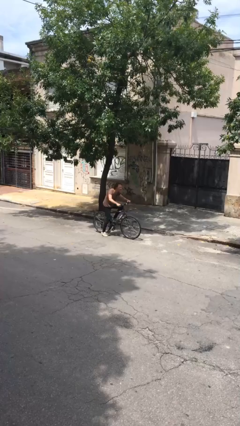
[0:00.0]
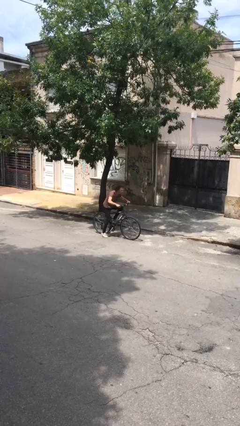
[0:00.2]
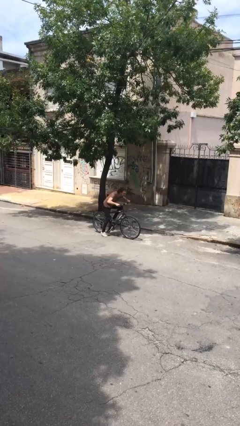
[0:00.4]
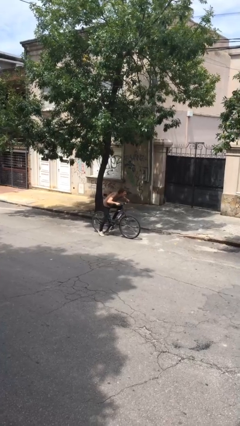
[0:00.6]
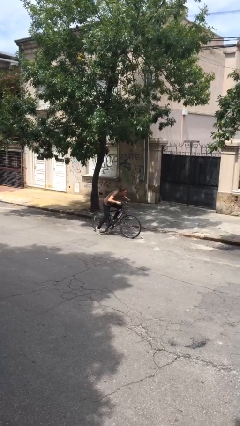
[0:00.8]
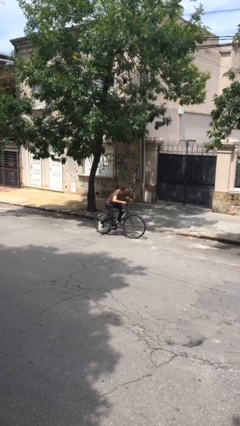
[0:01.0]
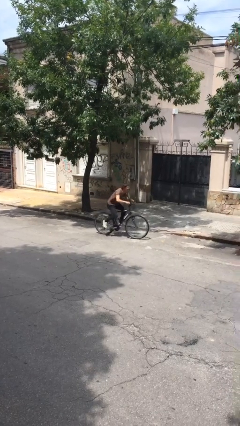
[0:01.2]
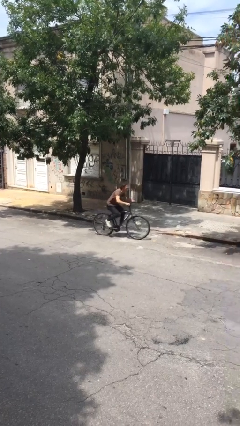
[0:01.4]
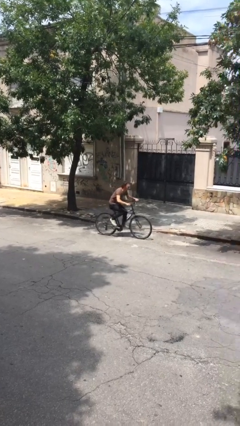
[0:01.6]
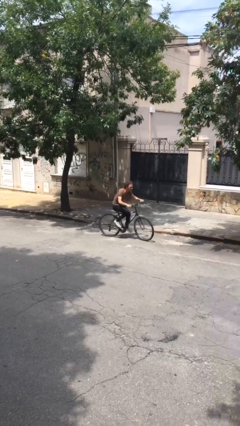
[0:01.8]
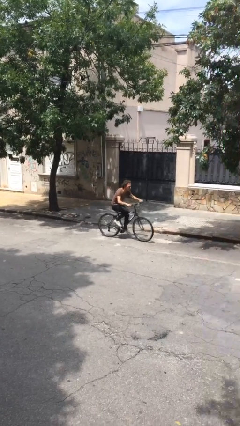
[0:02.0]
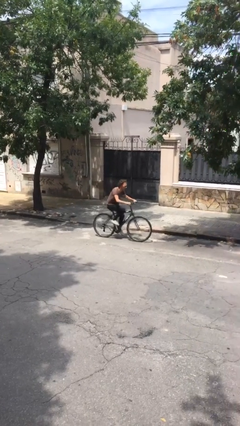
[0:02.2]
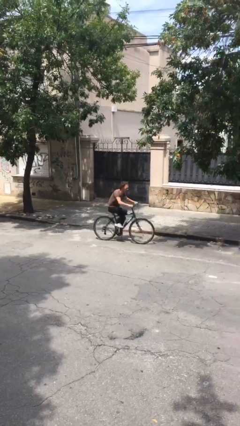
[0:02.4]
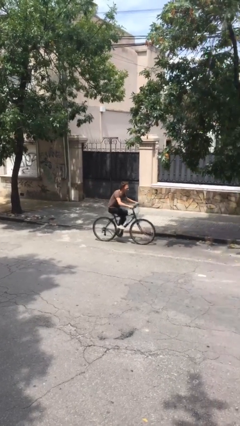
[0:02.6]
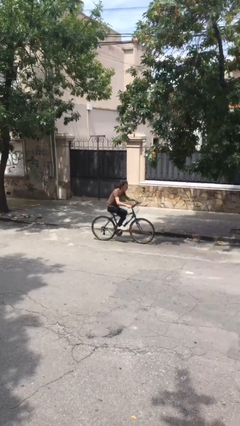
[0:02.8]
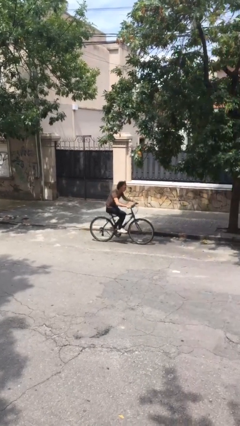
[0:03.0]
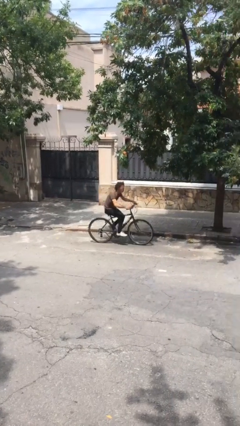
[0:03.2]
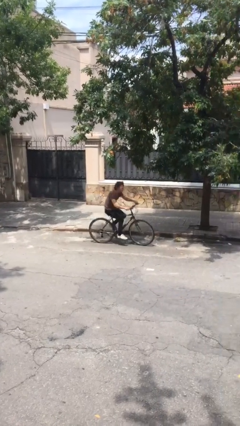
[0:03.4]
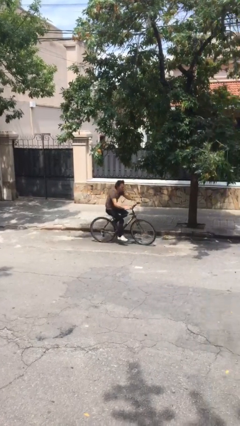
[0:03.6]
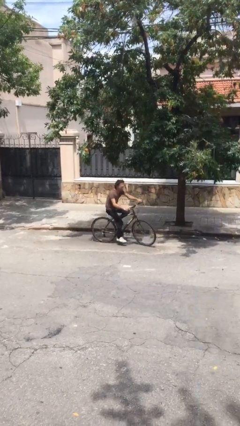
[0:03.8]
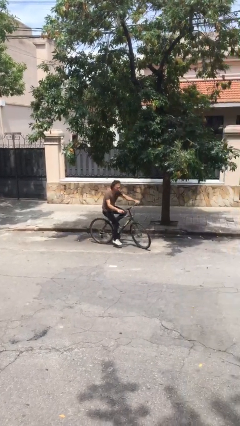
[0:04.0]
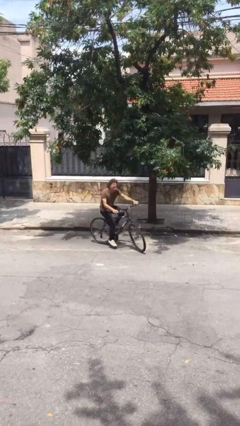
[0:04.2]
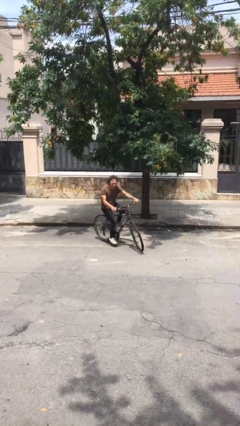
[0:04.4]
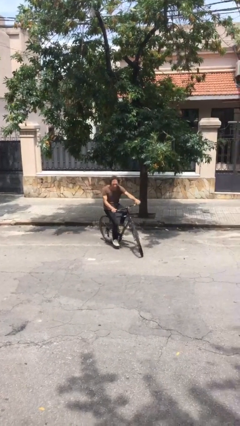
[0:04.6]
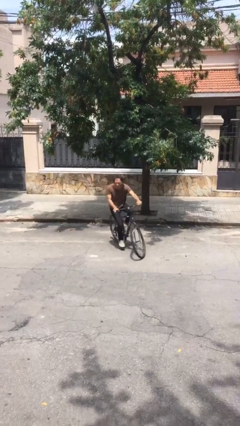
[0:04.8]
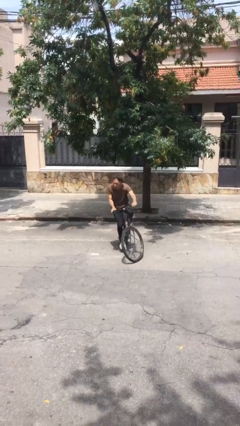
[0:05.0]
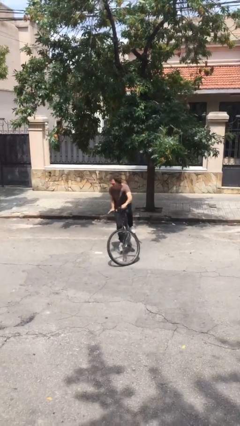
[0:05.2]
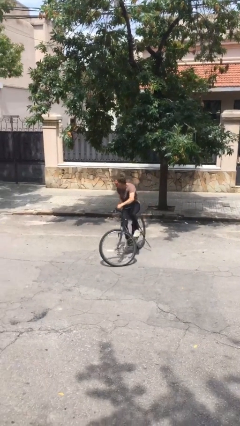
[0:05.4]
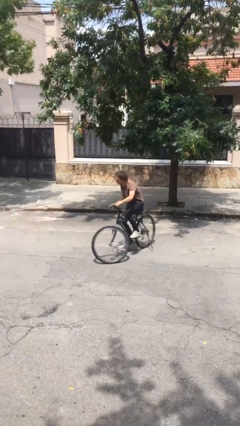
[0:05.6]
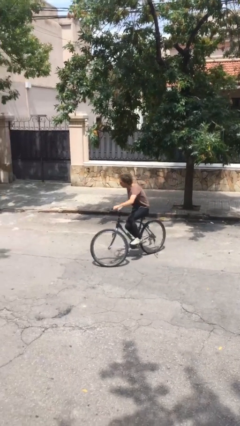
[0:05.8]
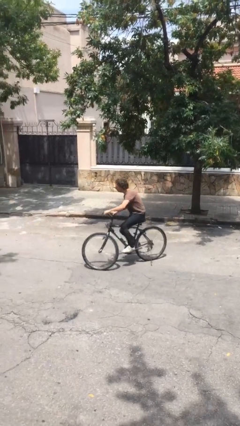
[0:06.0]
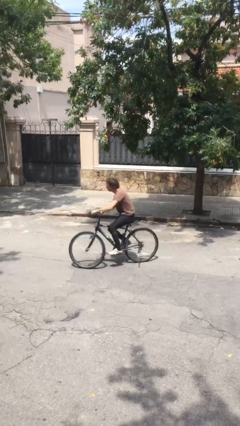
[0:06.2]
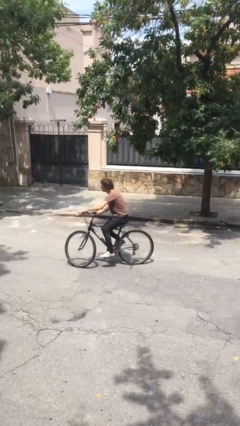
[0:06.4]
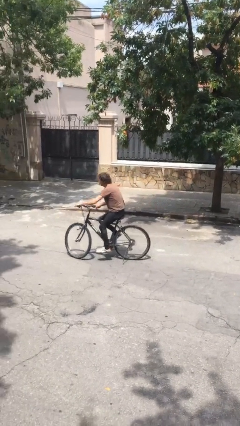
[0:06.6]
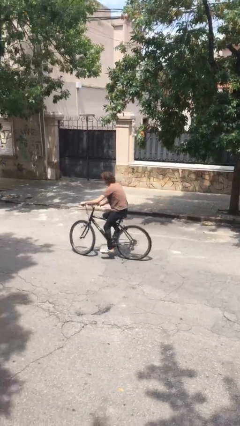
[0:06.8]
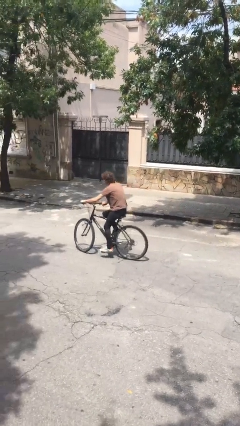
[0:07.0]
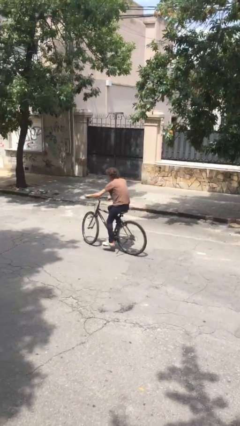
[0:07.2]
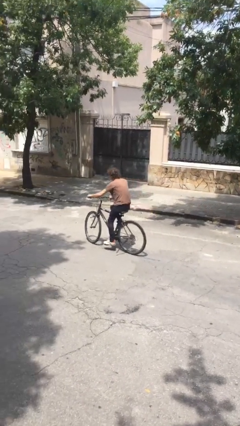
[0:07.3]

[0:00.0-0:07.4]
person rides bicycle

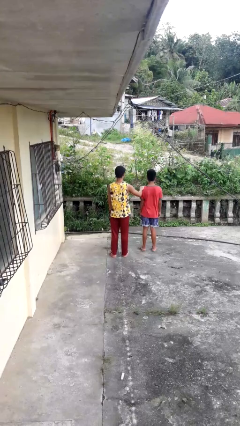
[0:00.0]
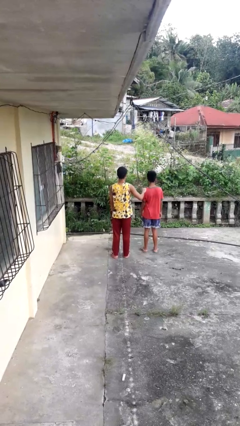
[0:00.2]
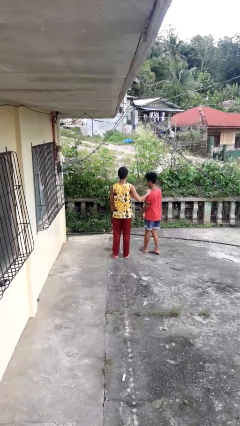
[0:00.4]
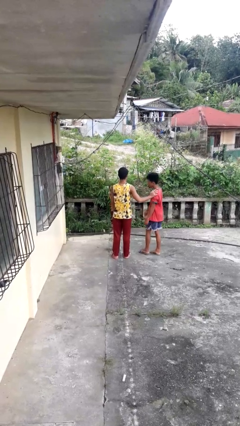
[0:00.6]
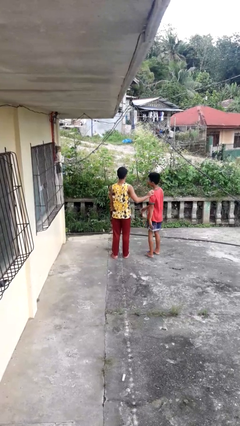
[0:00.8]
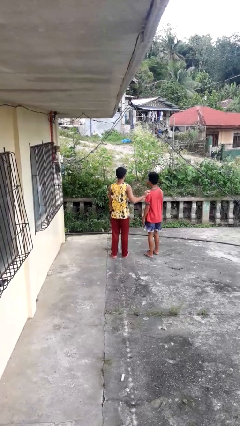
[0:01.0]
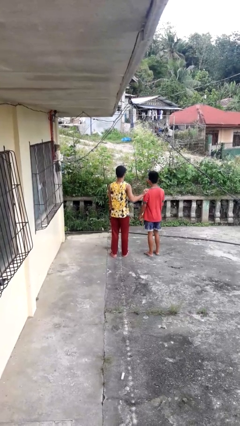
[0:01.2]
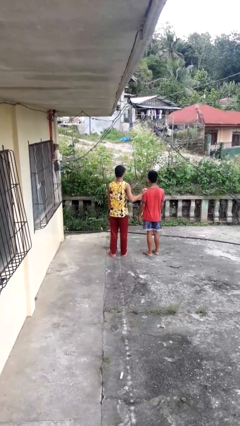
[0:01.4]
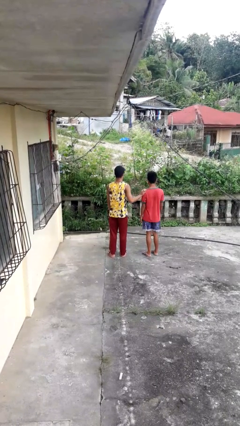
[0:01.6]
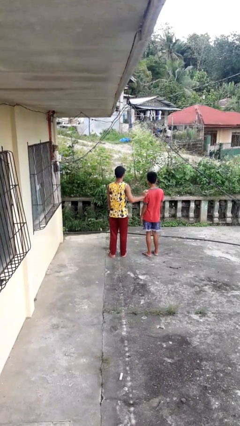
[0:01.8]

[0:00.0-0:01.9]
person grabs person by shoulder

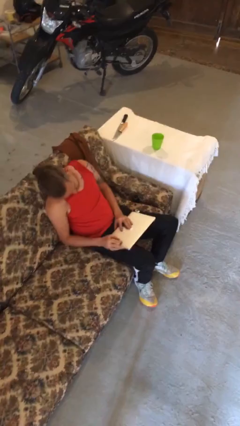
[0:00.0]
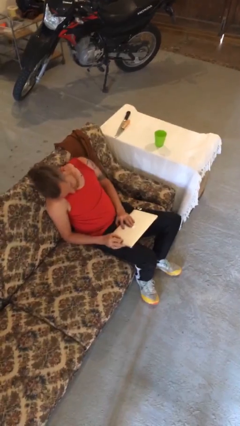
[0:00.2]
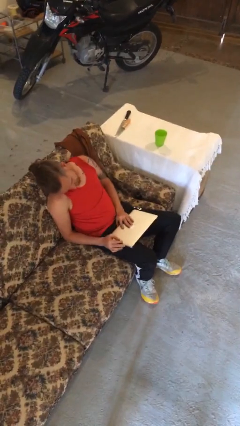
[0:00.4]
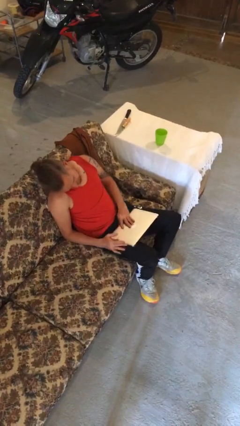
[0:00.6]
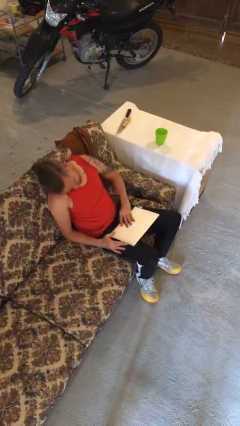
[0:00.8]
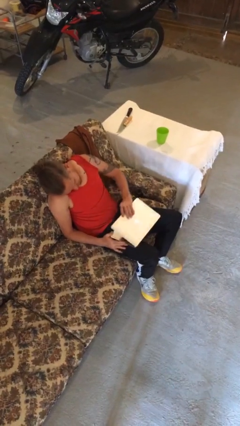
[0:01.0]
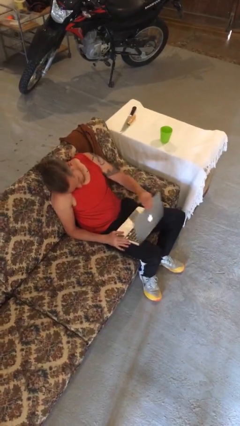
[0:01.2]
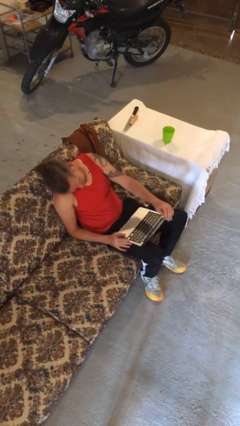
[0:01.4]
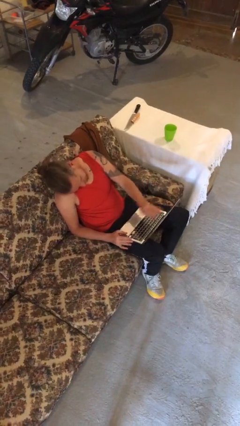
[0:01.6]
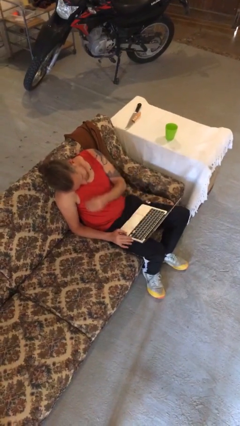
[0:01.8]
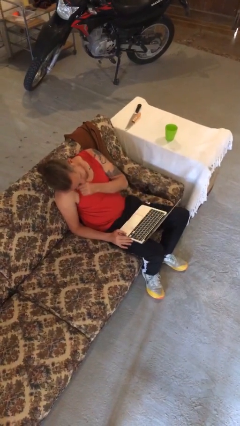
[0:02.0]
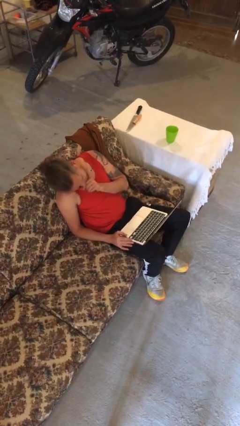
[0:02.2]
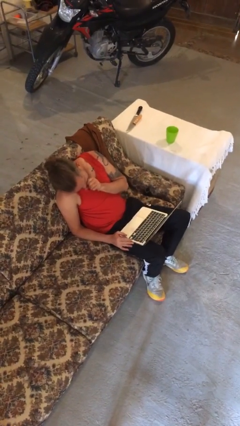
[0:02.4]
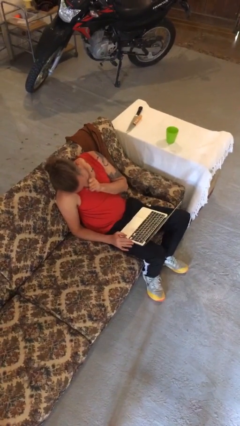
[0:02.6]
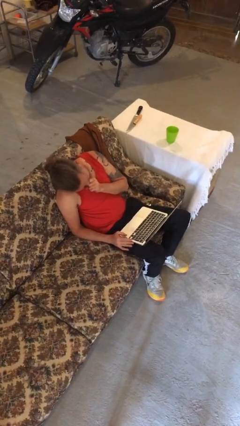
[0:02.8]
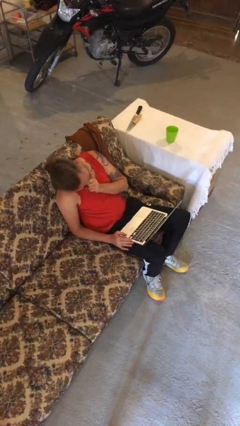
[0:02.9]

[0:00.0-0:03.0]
person opens laptop

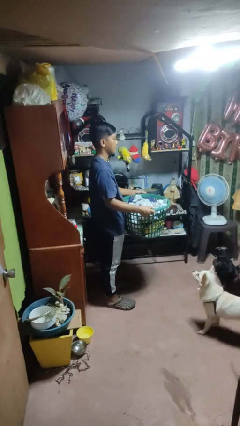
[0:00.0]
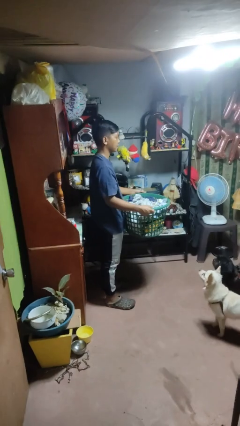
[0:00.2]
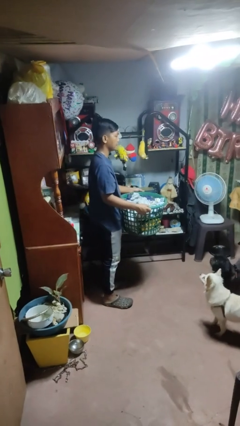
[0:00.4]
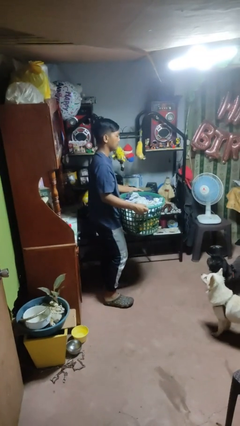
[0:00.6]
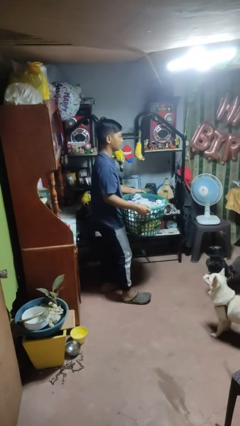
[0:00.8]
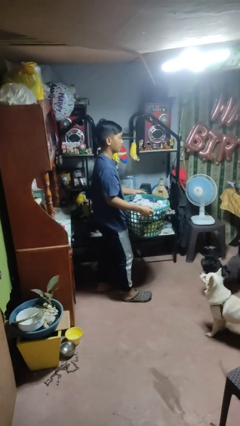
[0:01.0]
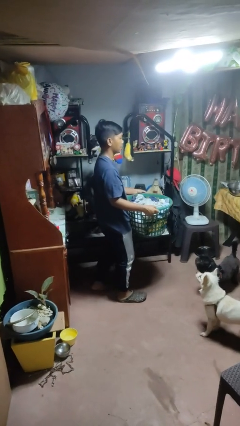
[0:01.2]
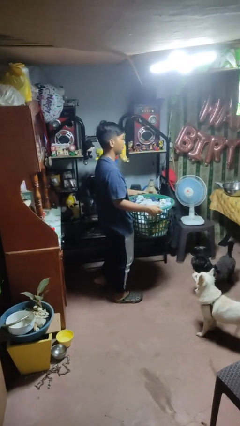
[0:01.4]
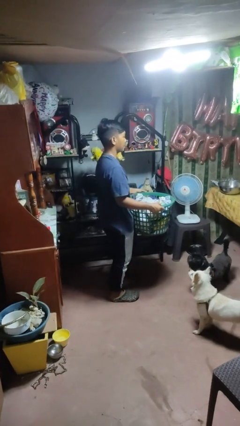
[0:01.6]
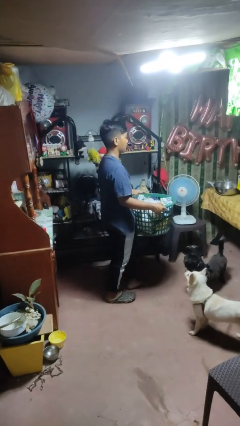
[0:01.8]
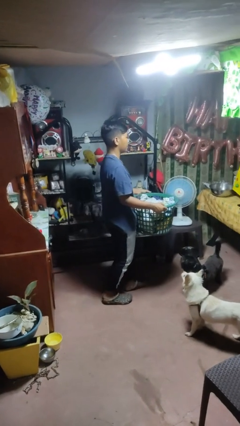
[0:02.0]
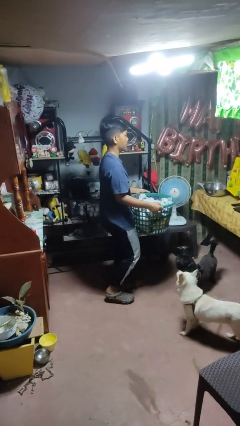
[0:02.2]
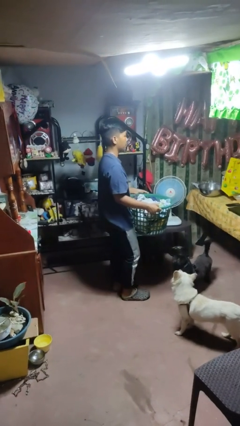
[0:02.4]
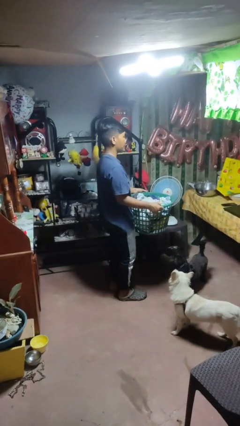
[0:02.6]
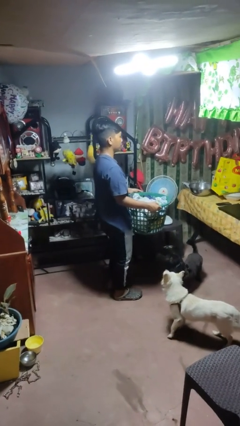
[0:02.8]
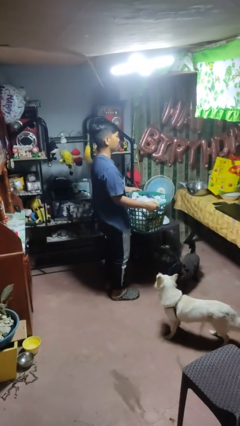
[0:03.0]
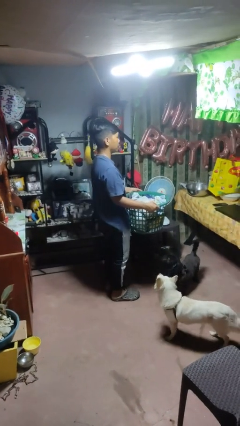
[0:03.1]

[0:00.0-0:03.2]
person carries laundry basket

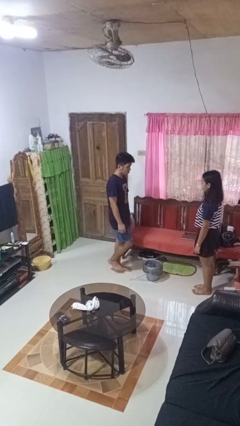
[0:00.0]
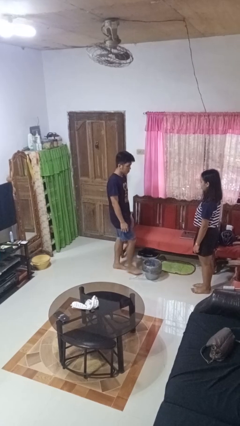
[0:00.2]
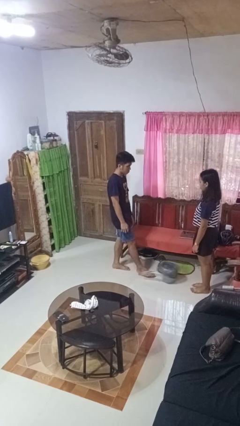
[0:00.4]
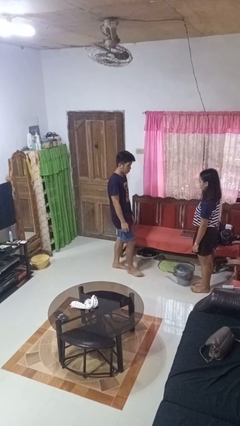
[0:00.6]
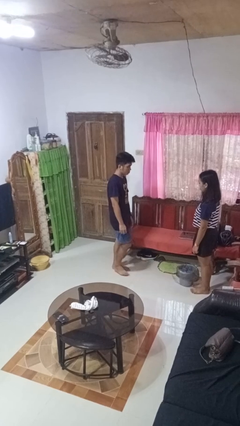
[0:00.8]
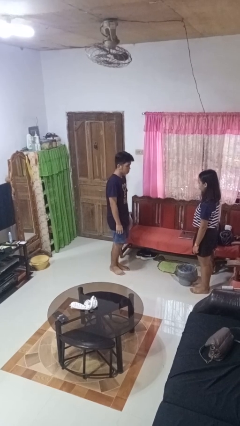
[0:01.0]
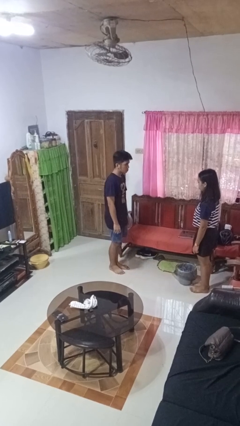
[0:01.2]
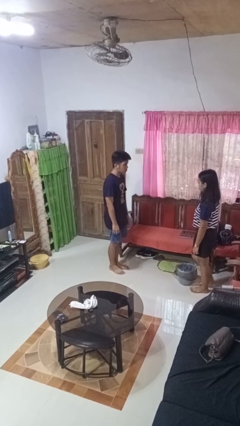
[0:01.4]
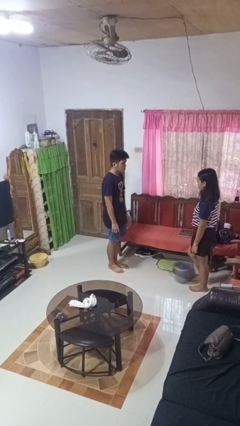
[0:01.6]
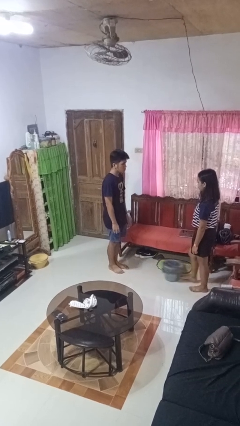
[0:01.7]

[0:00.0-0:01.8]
person kicks object to person

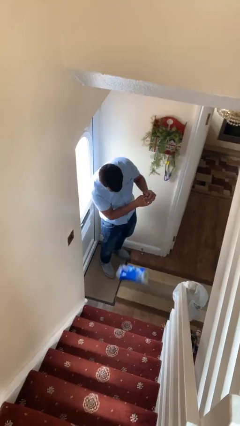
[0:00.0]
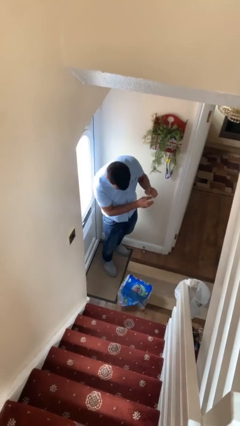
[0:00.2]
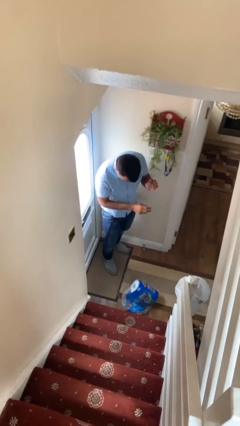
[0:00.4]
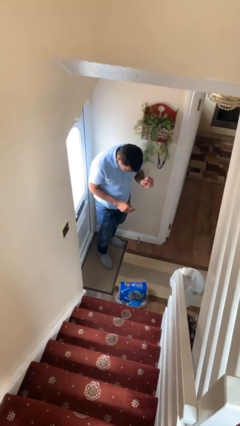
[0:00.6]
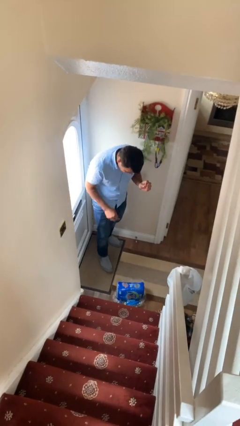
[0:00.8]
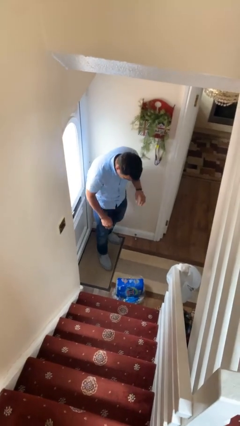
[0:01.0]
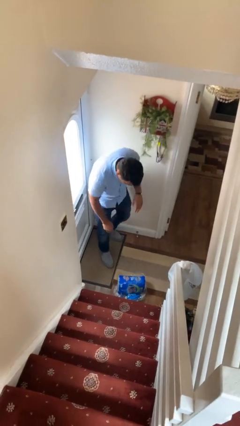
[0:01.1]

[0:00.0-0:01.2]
person drops object
